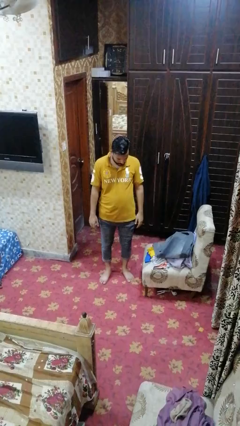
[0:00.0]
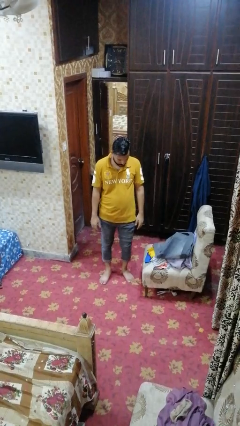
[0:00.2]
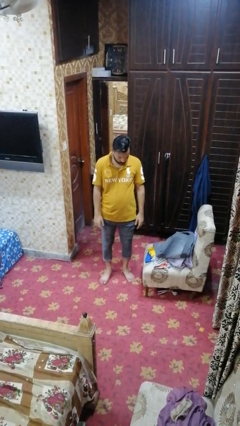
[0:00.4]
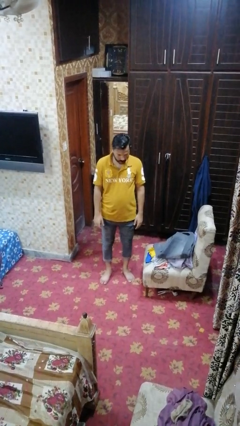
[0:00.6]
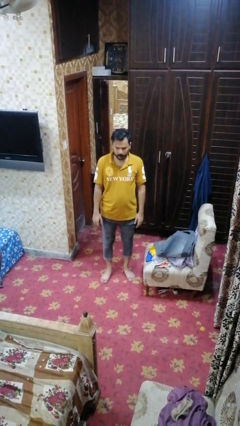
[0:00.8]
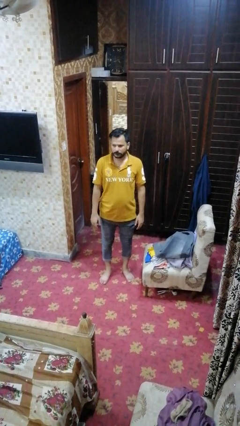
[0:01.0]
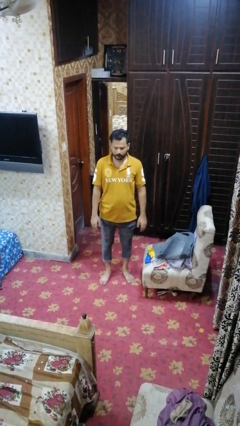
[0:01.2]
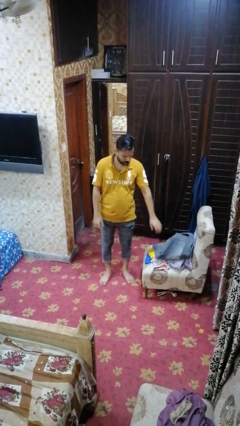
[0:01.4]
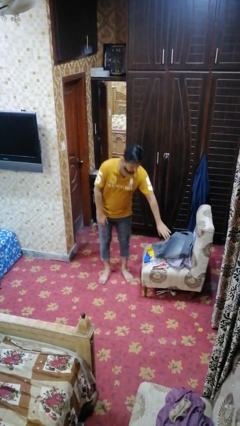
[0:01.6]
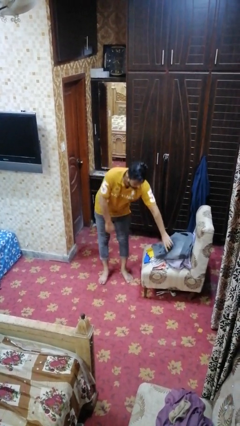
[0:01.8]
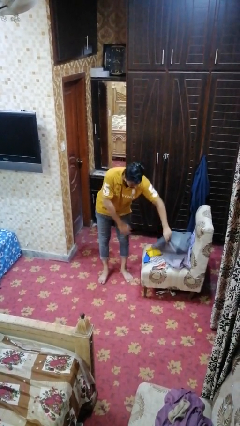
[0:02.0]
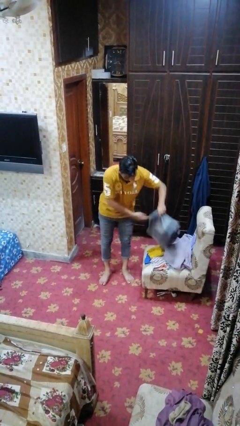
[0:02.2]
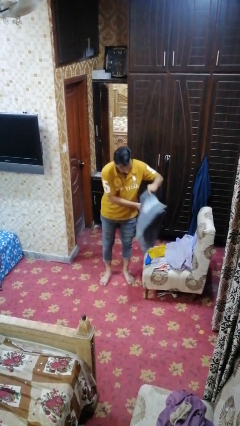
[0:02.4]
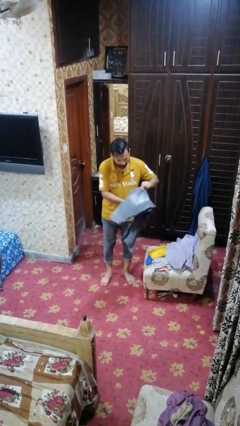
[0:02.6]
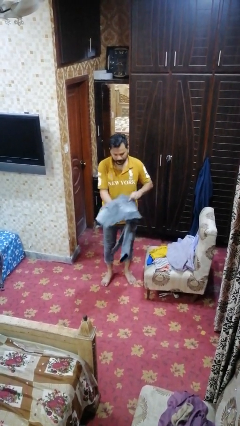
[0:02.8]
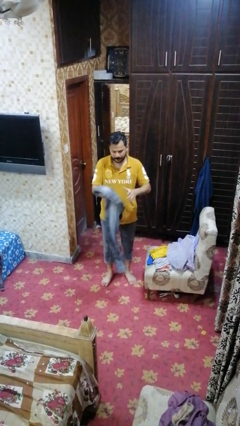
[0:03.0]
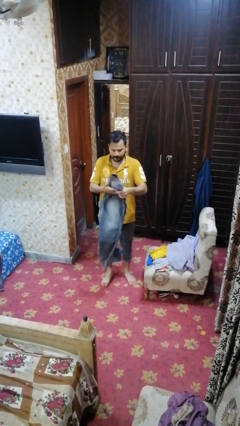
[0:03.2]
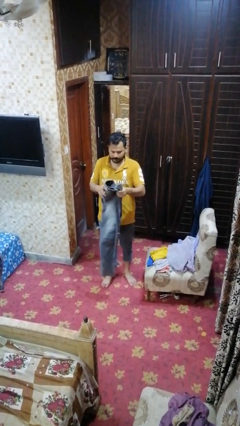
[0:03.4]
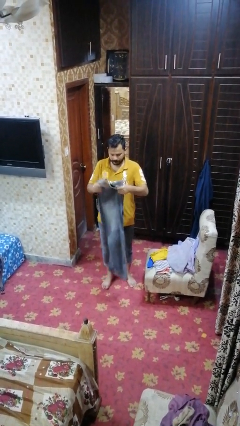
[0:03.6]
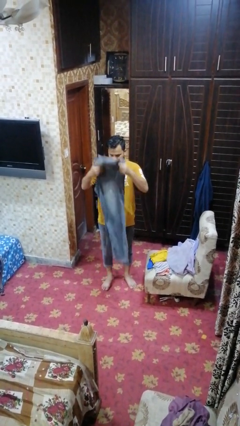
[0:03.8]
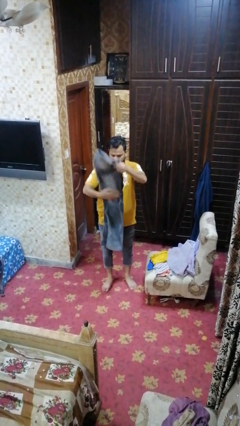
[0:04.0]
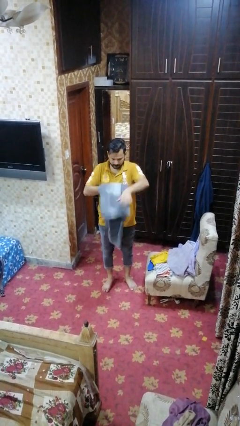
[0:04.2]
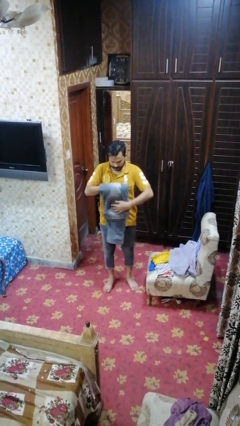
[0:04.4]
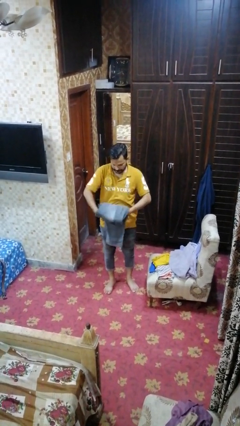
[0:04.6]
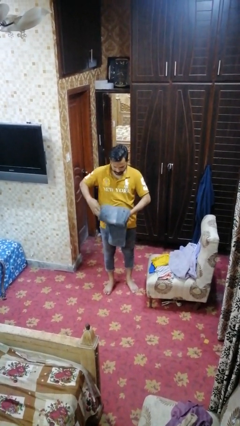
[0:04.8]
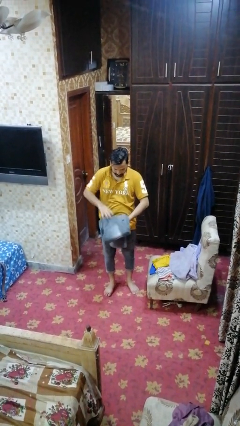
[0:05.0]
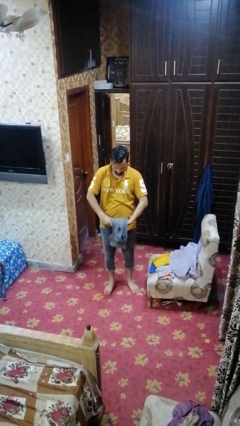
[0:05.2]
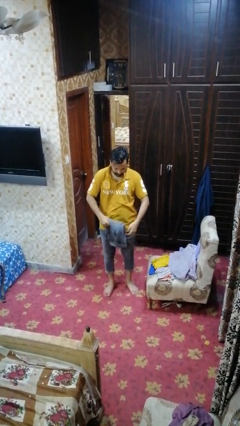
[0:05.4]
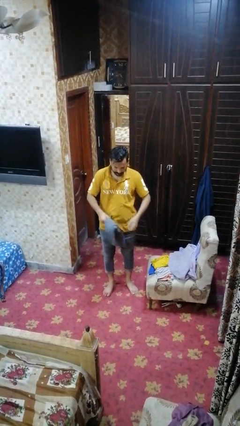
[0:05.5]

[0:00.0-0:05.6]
person folds pants

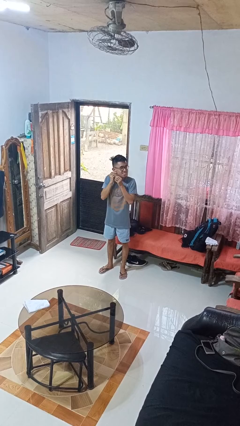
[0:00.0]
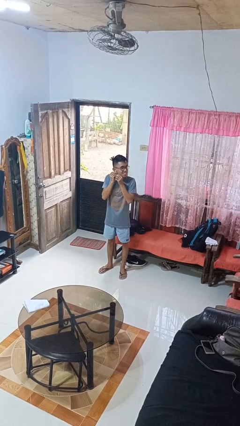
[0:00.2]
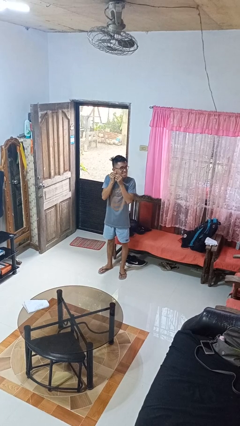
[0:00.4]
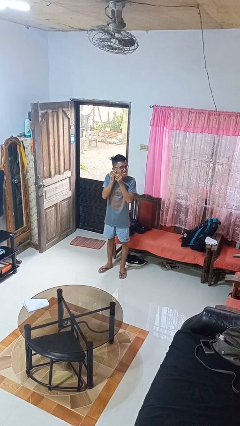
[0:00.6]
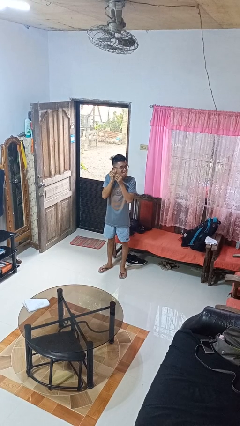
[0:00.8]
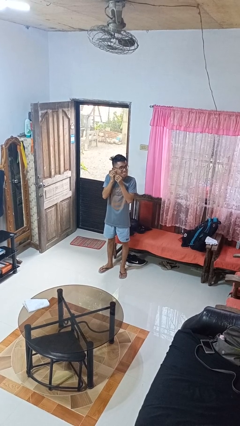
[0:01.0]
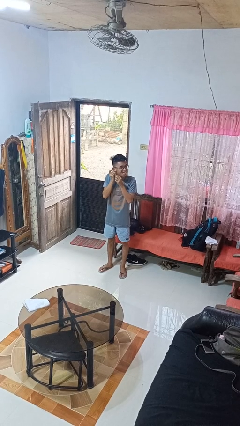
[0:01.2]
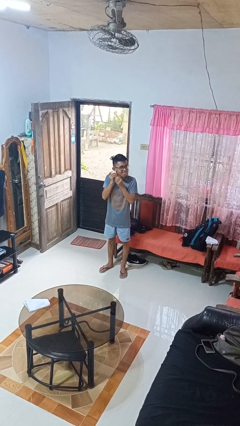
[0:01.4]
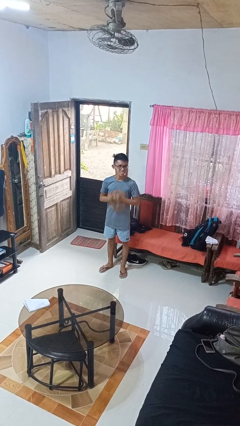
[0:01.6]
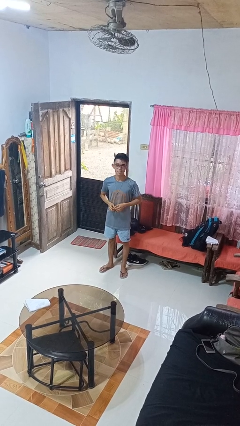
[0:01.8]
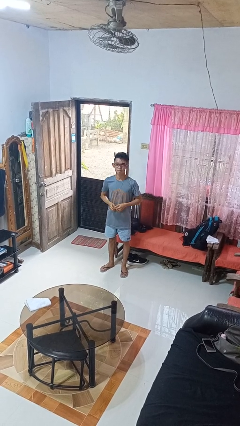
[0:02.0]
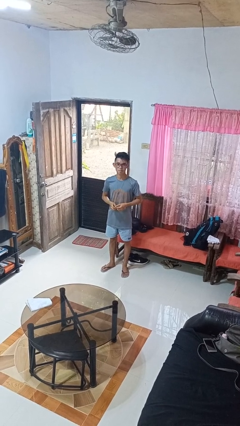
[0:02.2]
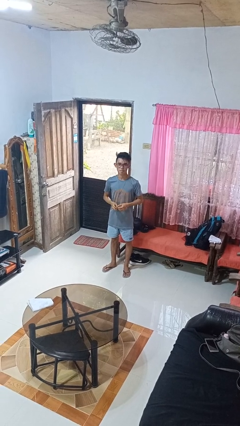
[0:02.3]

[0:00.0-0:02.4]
person puts on earrings

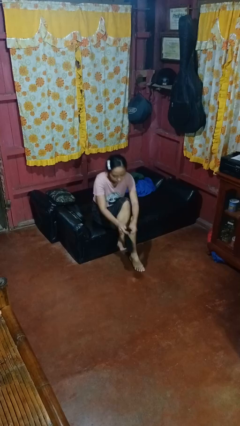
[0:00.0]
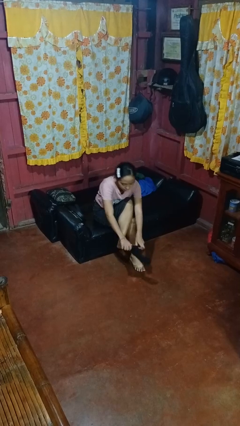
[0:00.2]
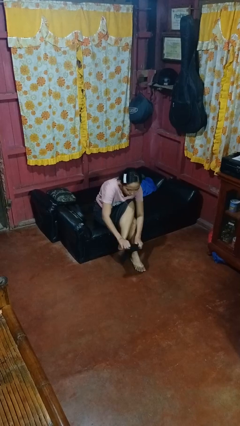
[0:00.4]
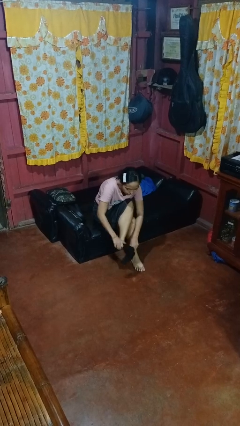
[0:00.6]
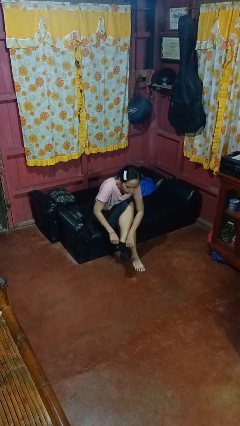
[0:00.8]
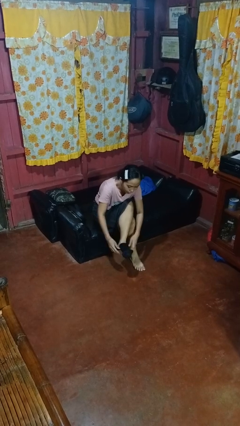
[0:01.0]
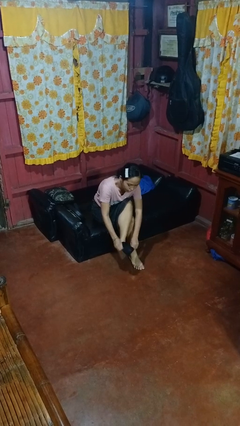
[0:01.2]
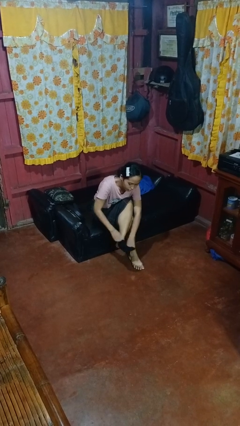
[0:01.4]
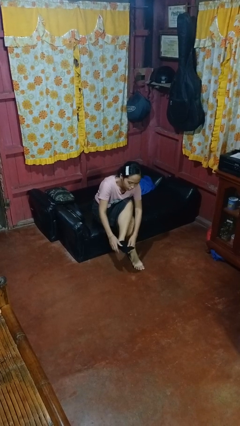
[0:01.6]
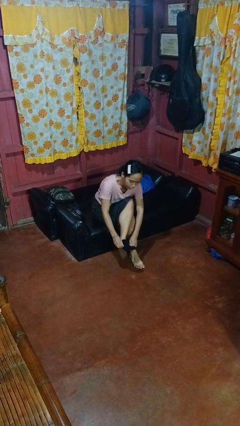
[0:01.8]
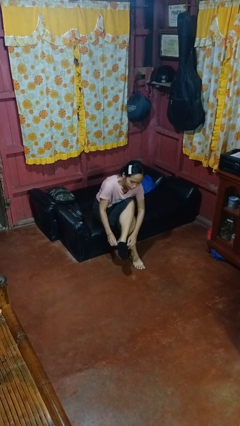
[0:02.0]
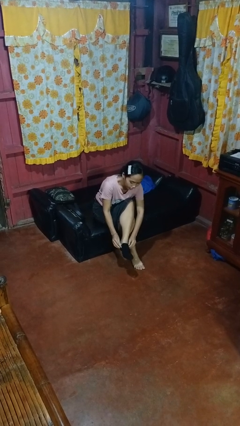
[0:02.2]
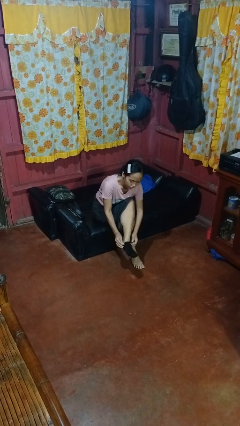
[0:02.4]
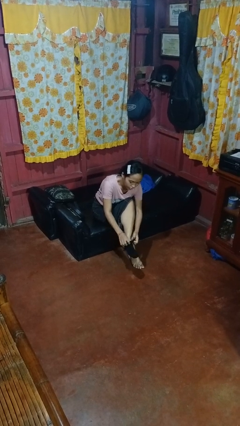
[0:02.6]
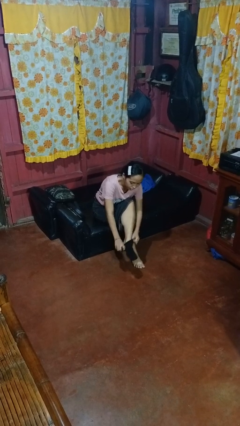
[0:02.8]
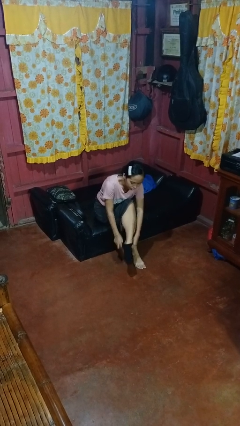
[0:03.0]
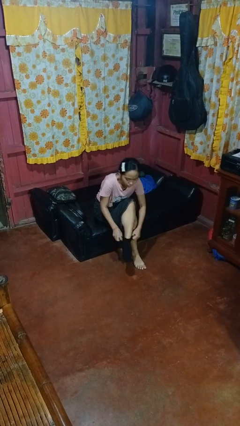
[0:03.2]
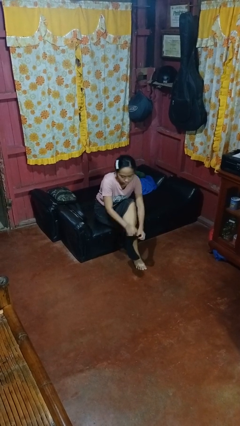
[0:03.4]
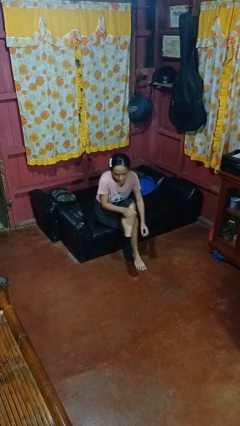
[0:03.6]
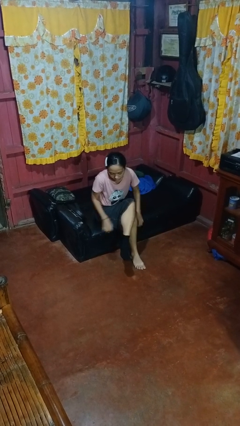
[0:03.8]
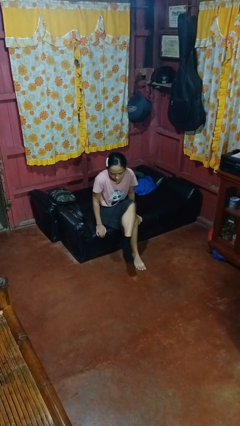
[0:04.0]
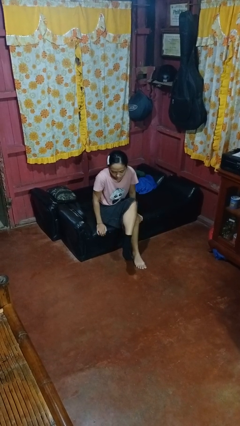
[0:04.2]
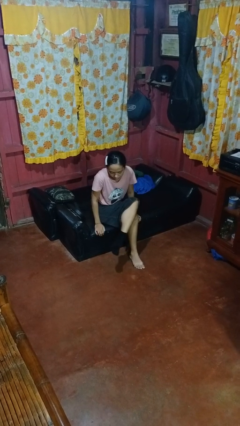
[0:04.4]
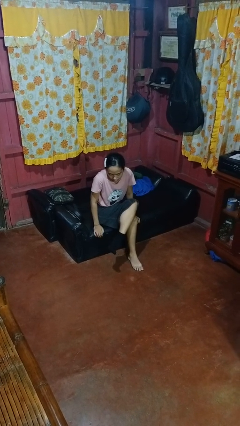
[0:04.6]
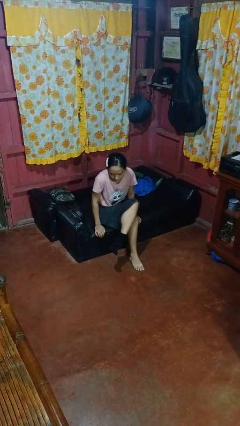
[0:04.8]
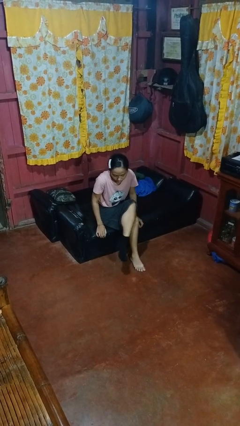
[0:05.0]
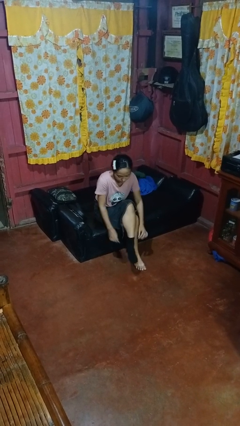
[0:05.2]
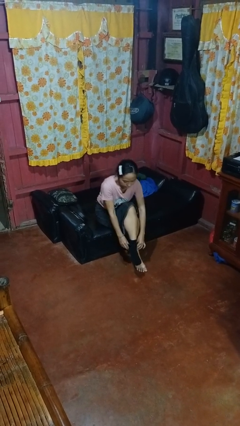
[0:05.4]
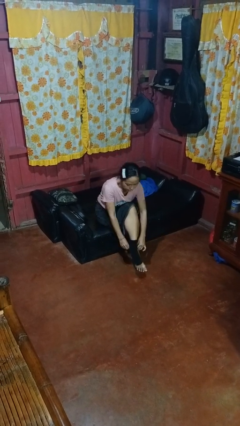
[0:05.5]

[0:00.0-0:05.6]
person puts on socks

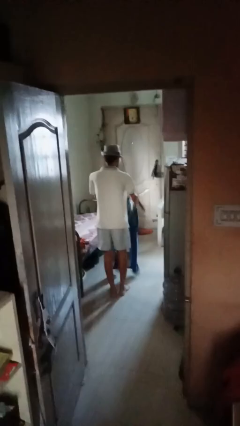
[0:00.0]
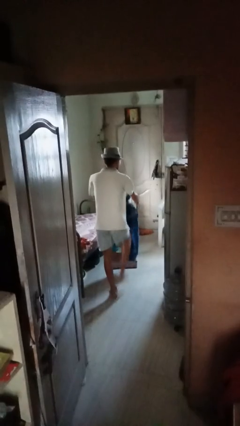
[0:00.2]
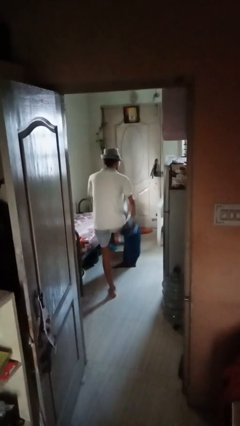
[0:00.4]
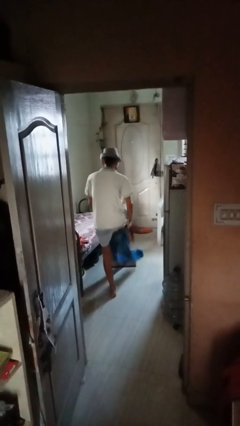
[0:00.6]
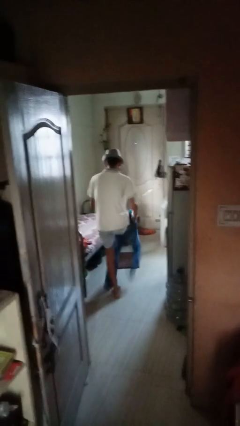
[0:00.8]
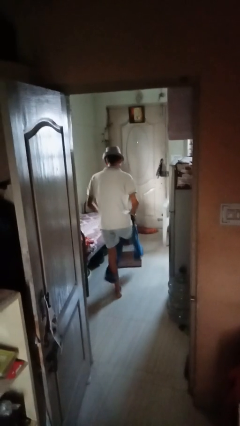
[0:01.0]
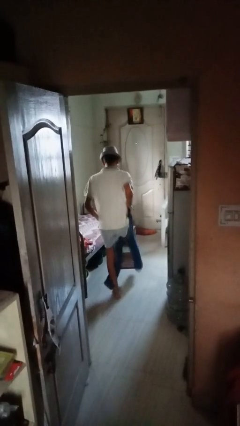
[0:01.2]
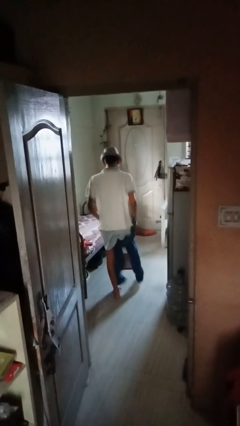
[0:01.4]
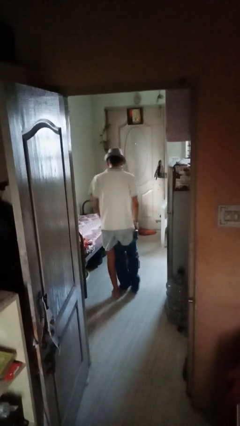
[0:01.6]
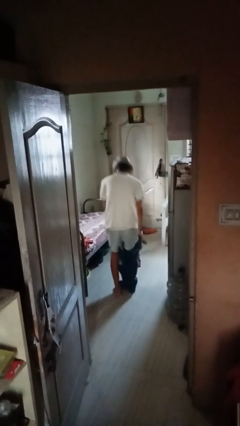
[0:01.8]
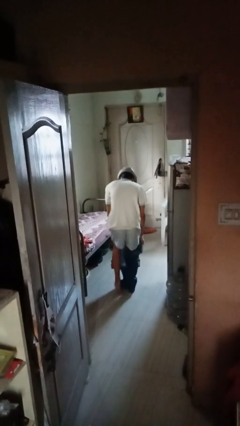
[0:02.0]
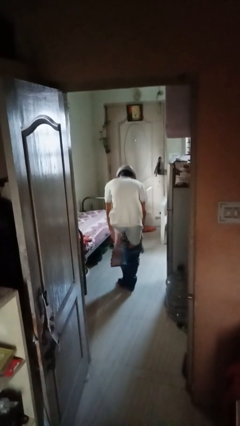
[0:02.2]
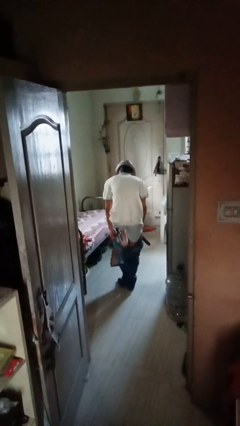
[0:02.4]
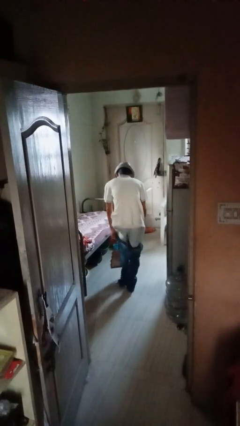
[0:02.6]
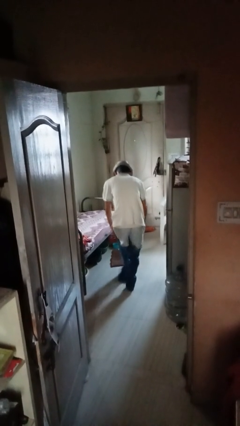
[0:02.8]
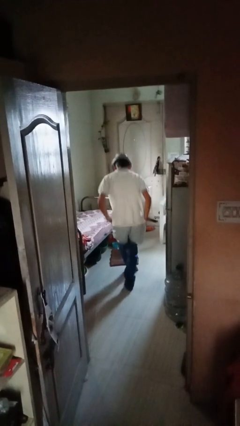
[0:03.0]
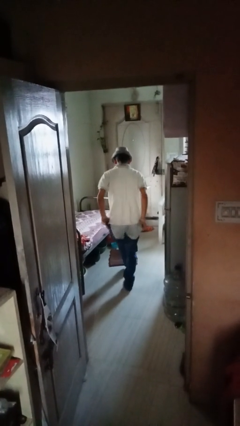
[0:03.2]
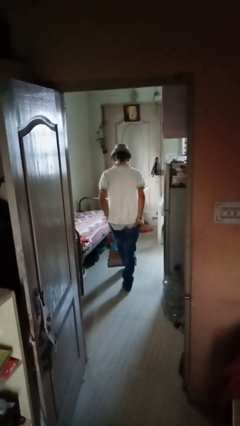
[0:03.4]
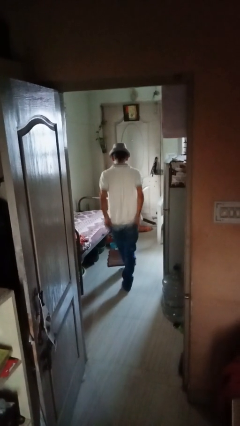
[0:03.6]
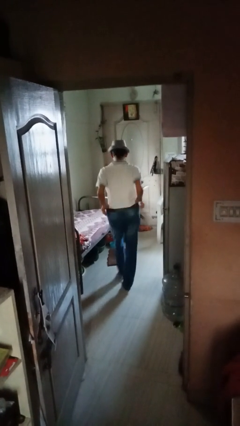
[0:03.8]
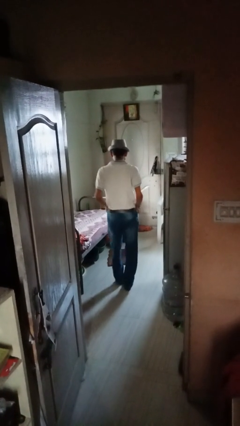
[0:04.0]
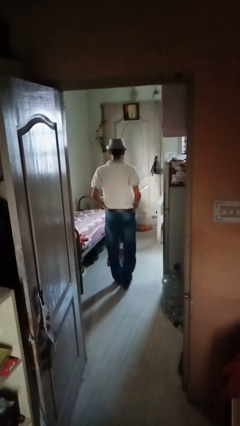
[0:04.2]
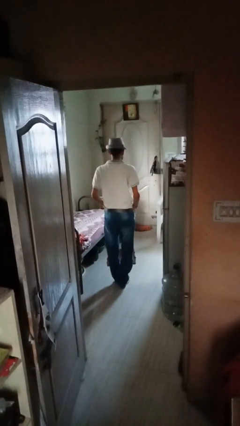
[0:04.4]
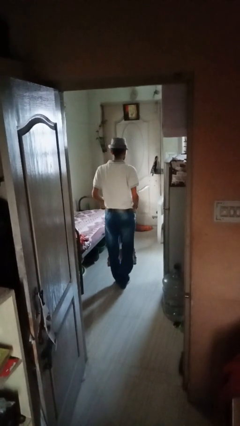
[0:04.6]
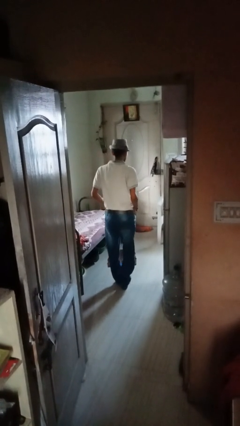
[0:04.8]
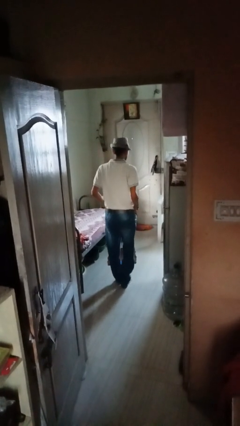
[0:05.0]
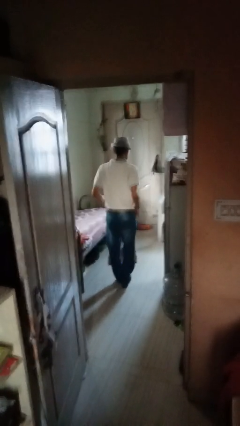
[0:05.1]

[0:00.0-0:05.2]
person puts on pants
